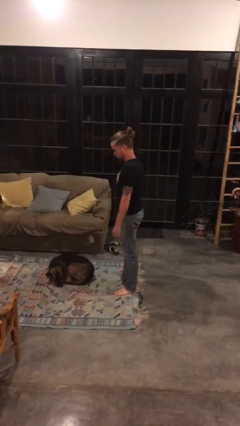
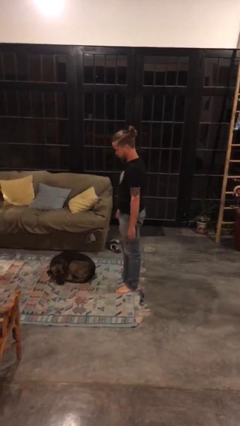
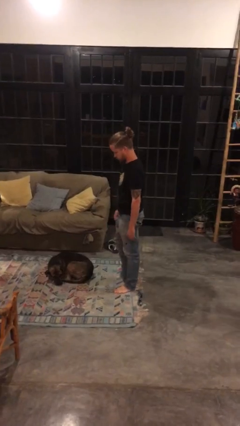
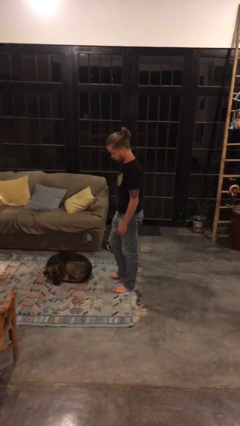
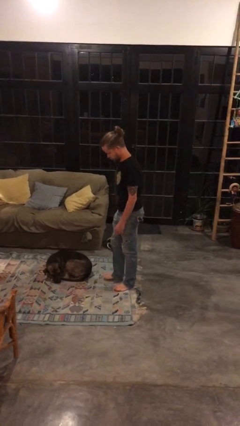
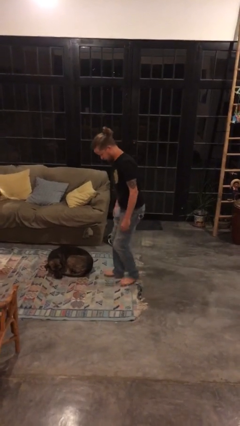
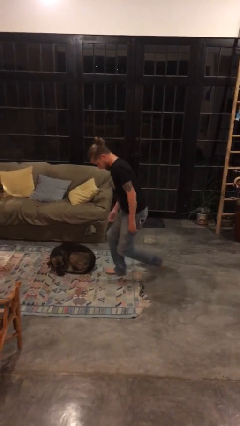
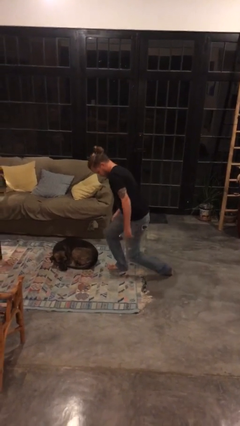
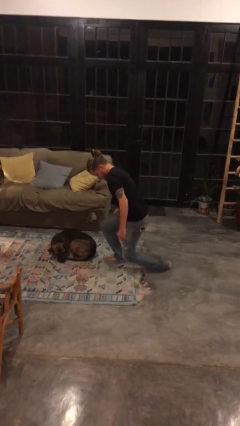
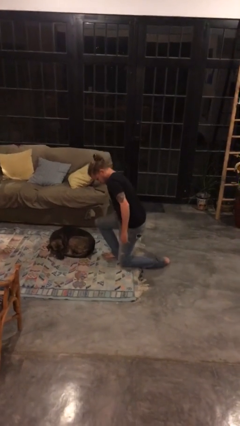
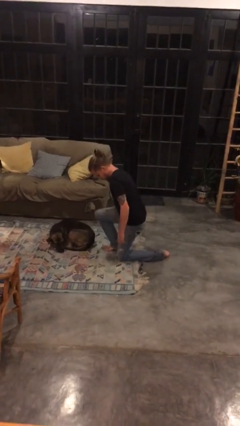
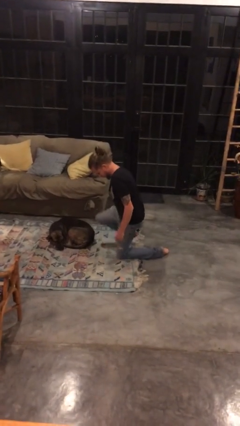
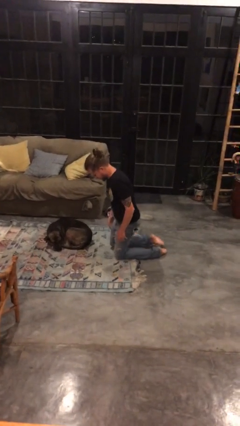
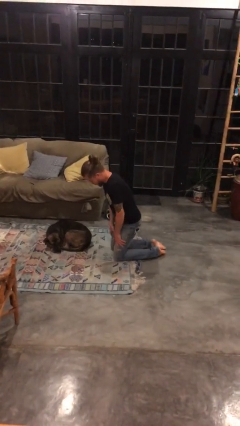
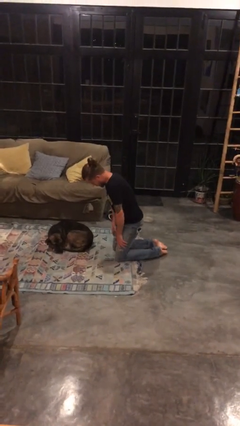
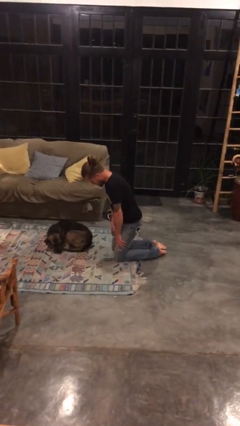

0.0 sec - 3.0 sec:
person kneels

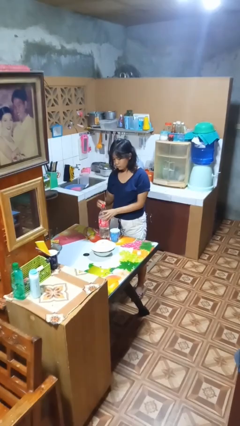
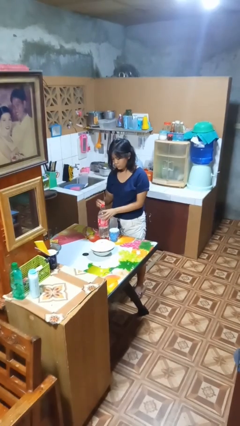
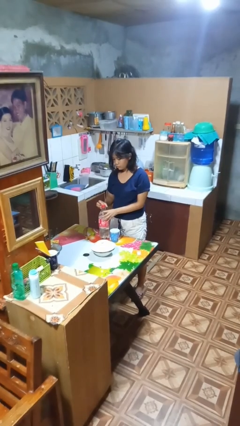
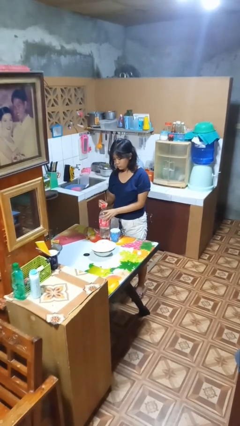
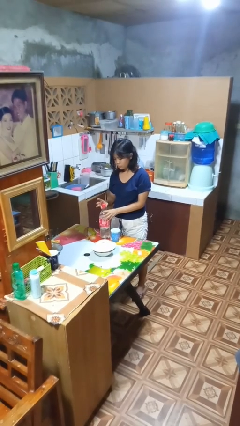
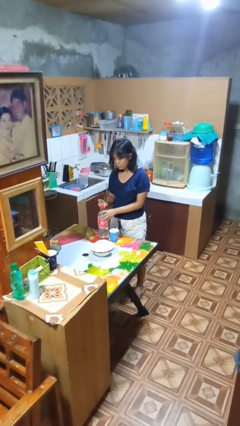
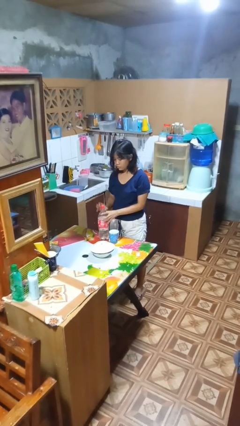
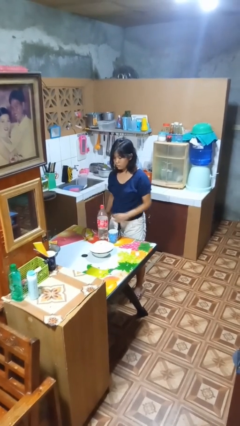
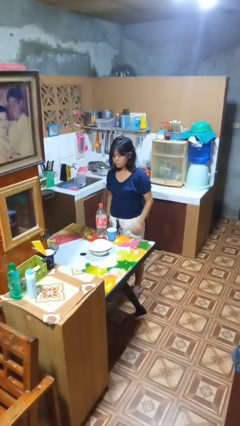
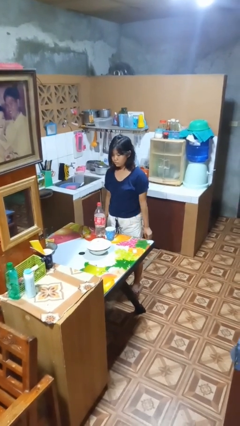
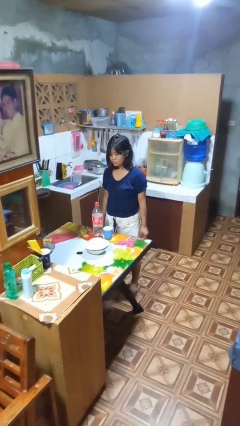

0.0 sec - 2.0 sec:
person screws lid to bottle

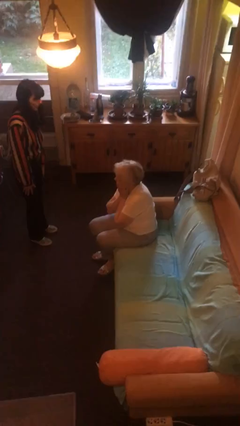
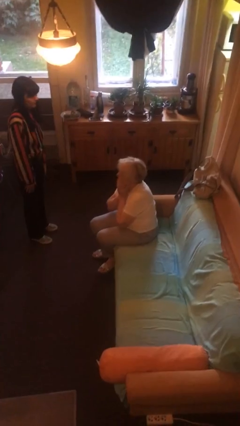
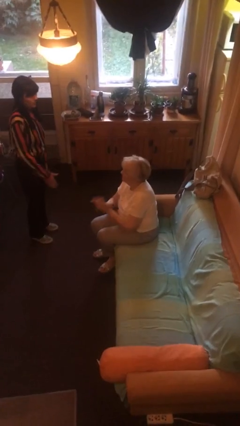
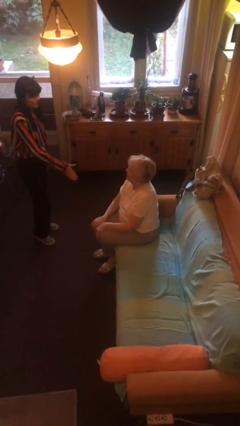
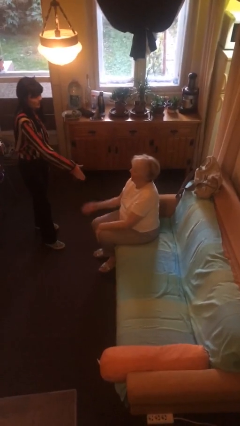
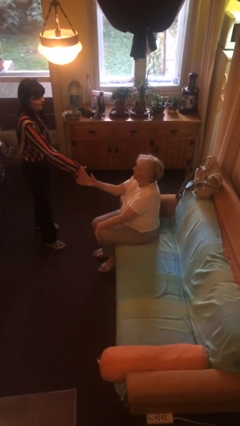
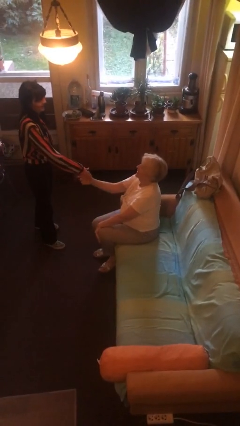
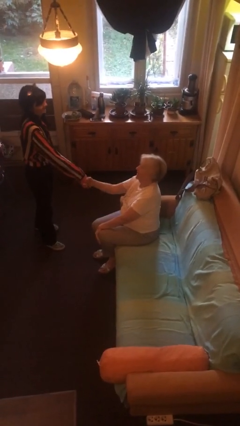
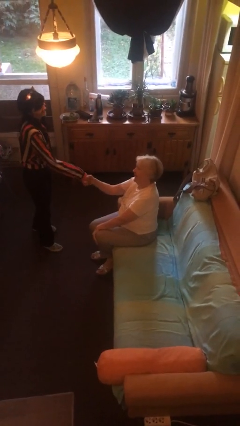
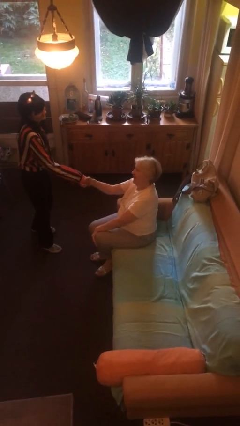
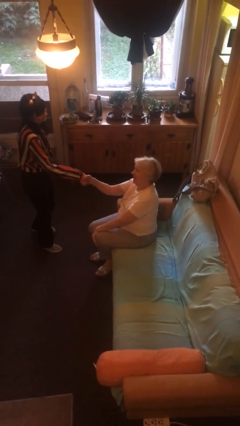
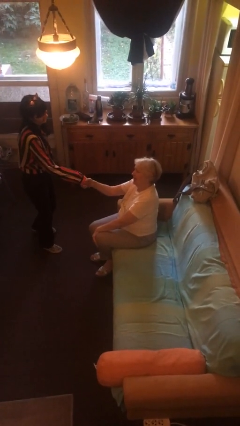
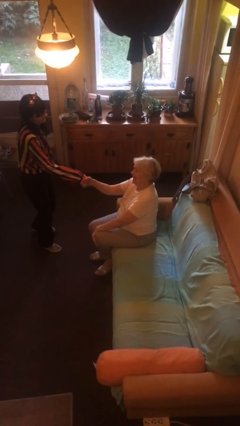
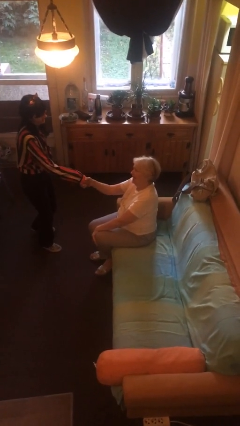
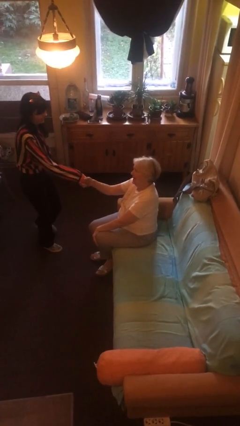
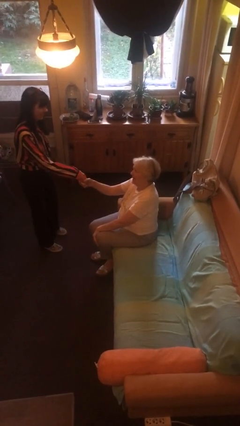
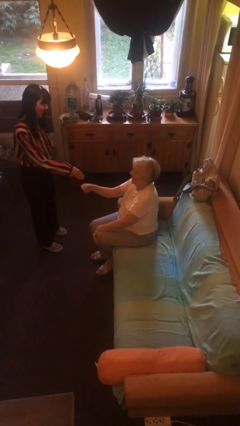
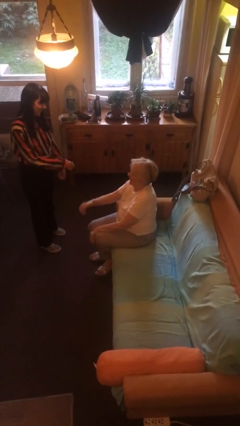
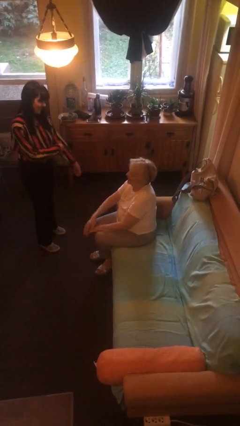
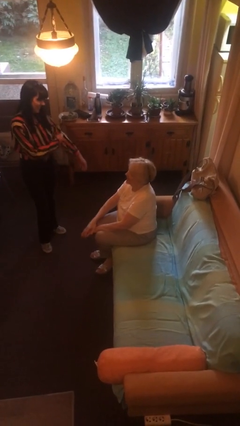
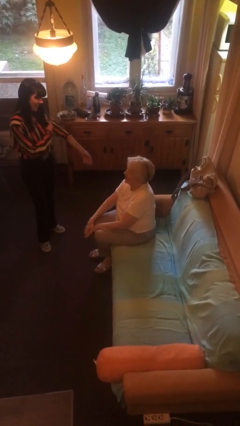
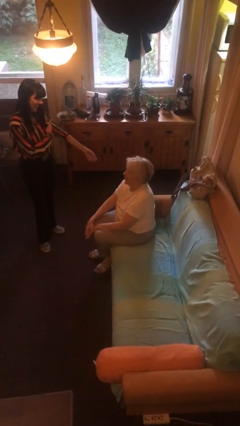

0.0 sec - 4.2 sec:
person shakes hand

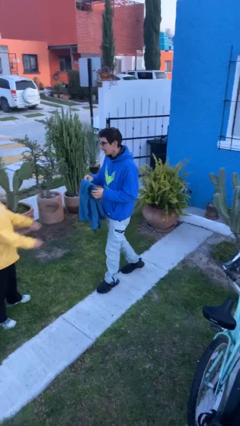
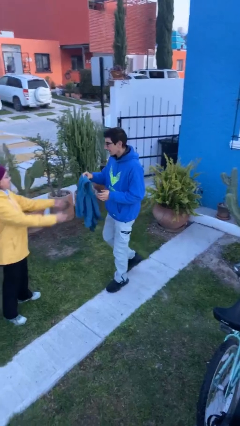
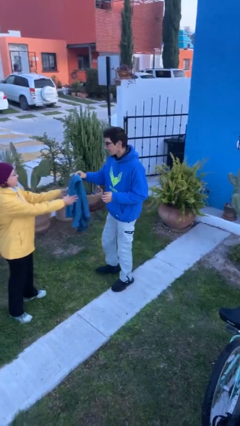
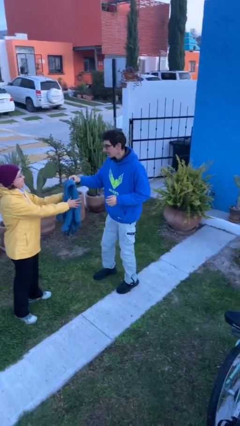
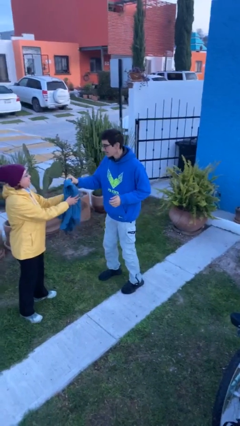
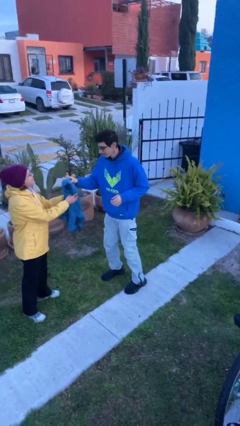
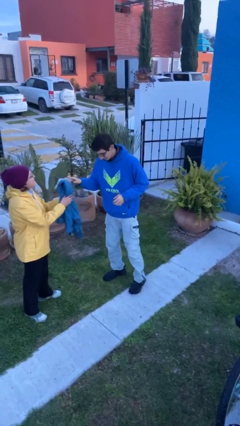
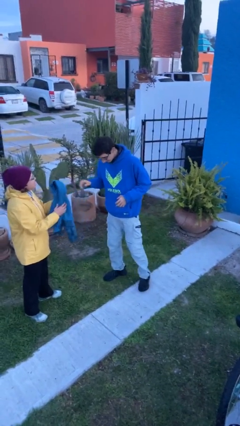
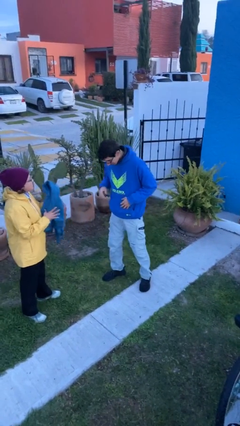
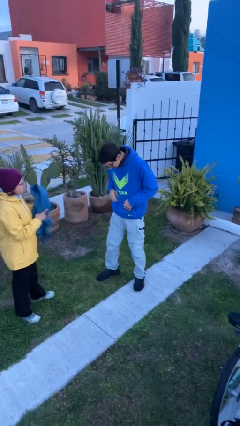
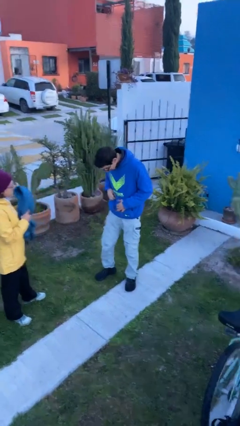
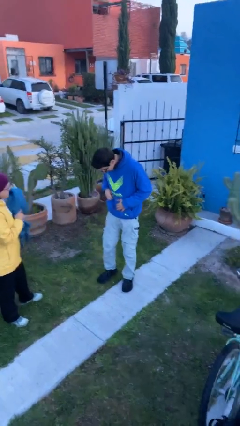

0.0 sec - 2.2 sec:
person transfers object to person

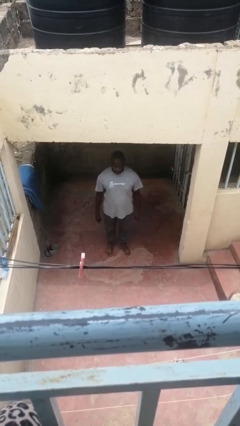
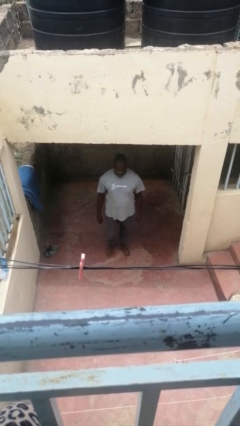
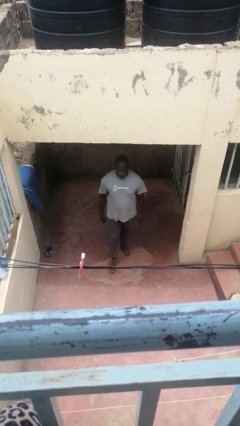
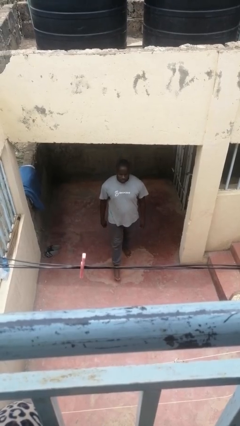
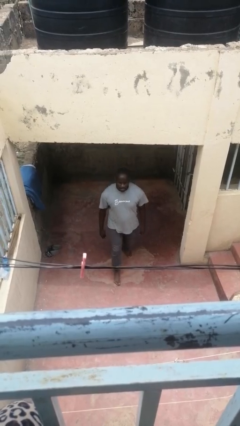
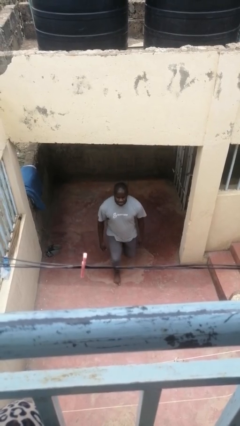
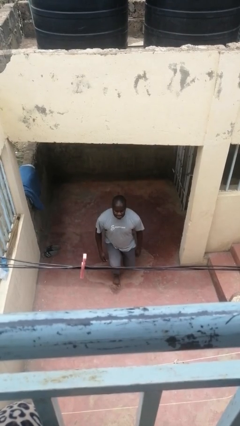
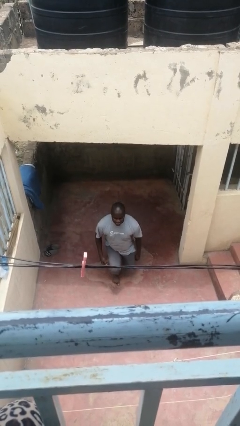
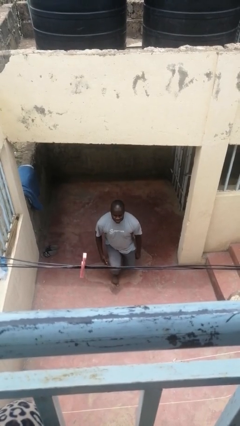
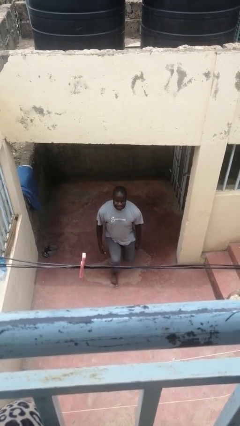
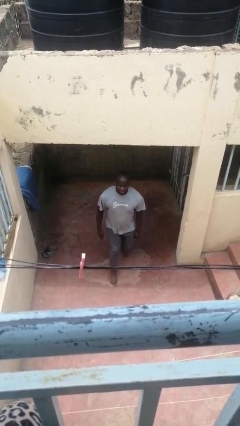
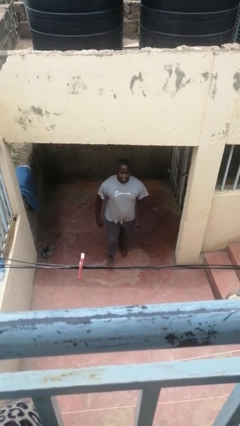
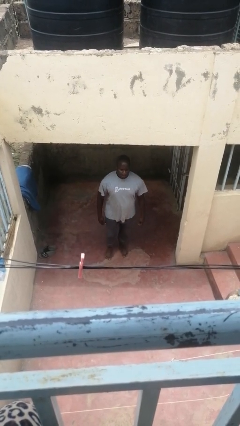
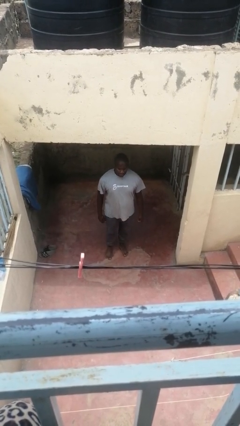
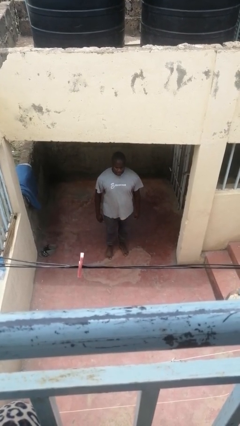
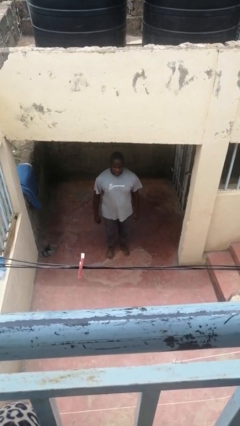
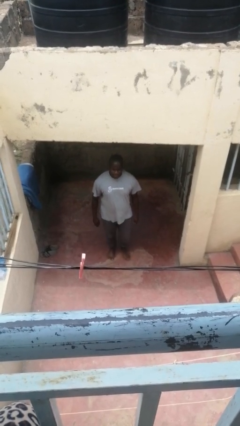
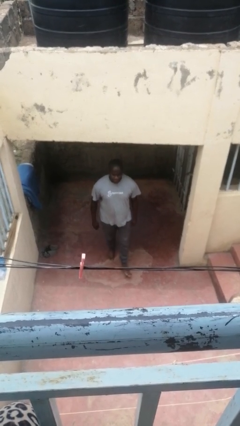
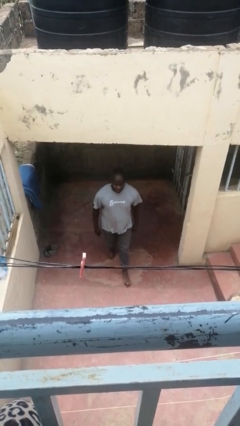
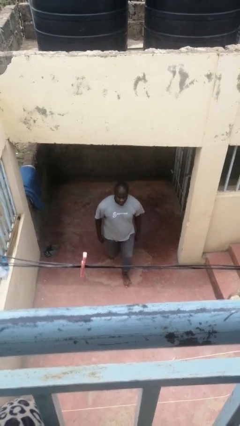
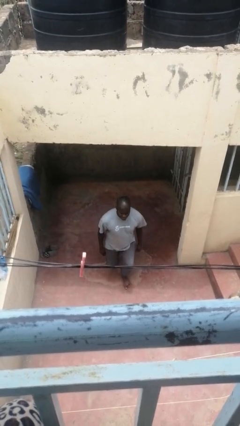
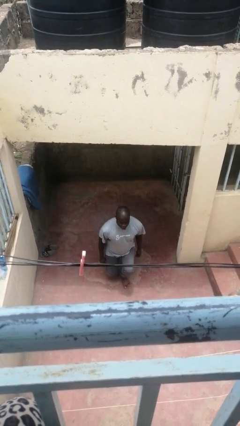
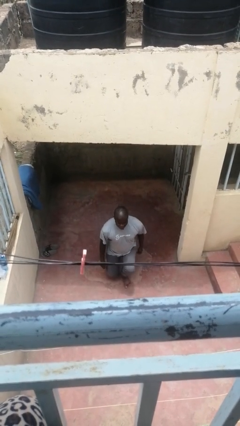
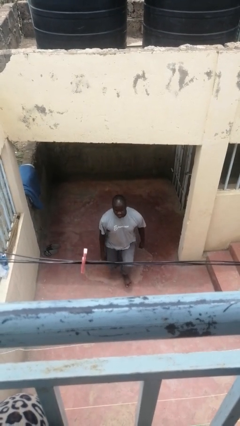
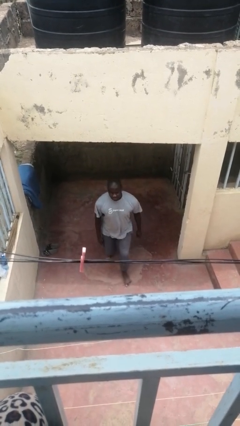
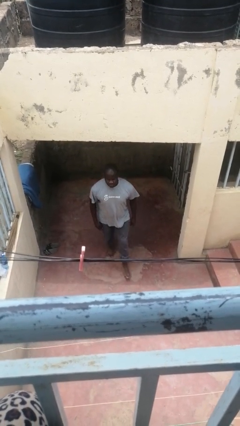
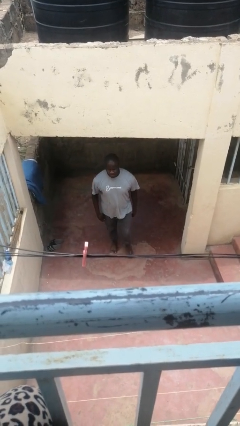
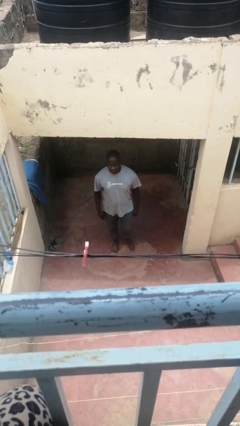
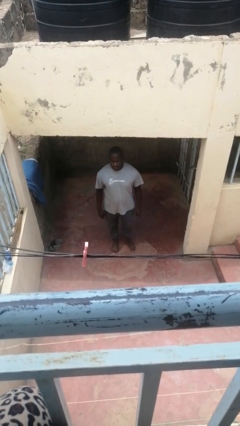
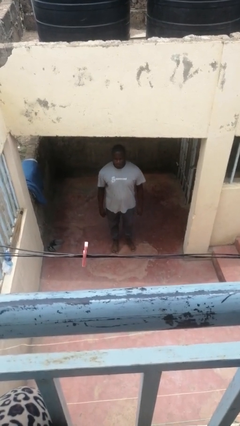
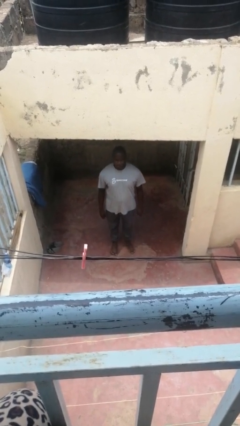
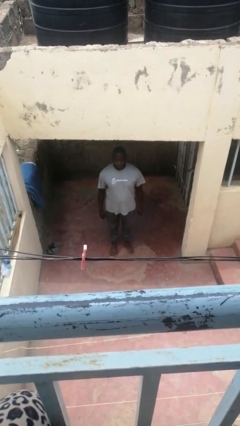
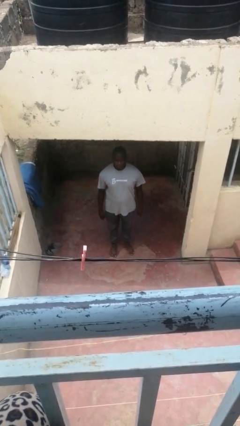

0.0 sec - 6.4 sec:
person exercises with lunges
